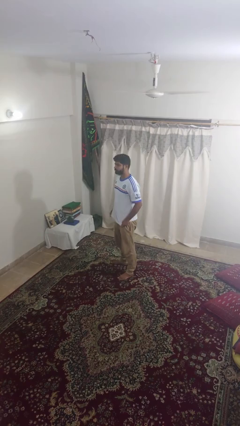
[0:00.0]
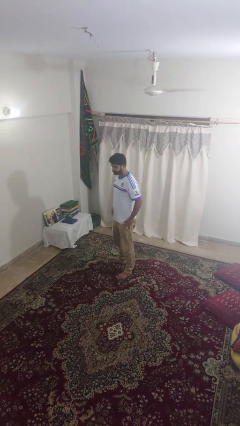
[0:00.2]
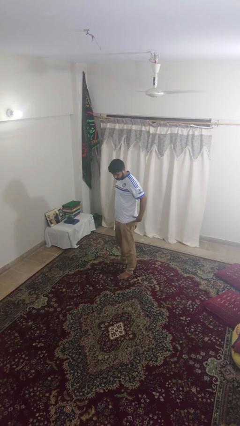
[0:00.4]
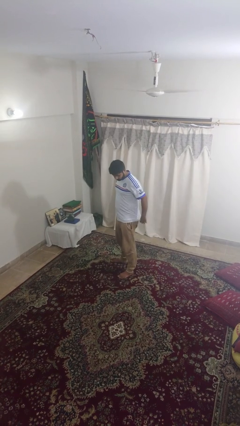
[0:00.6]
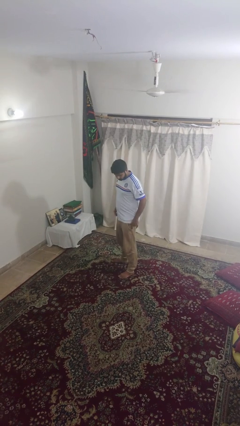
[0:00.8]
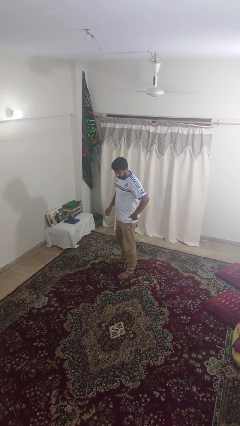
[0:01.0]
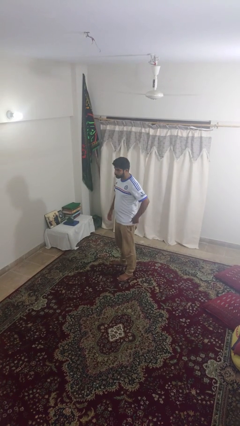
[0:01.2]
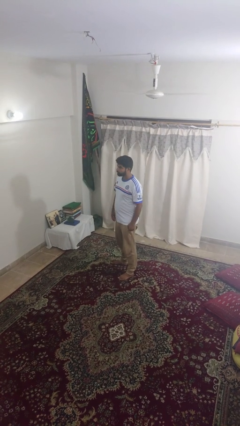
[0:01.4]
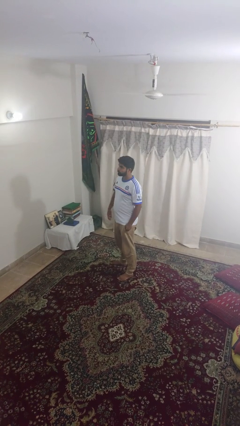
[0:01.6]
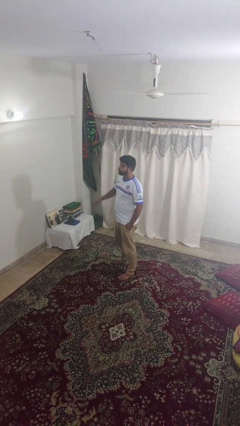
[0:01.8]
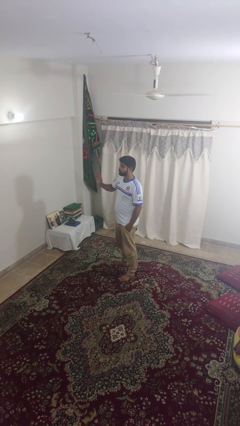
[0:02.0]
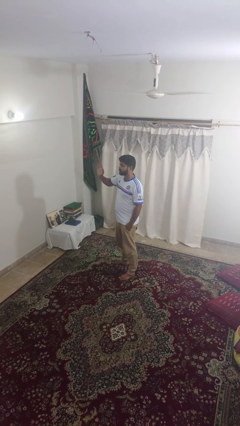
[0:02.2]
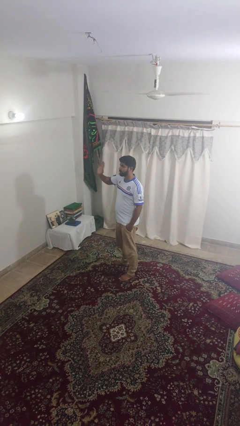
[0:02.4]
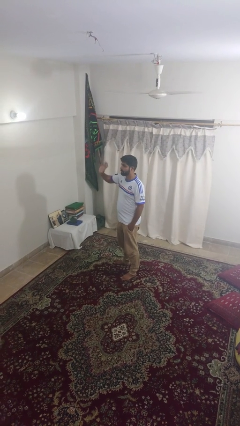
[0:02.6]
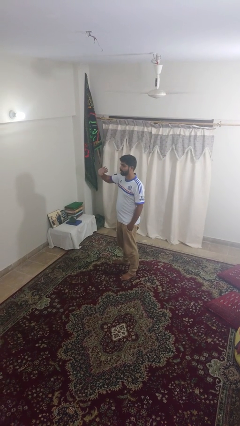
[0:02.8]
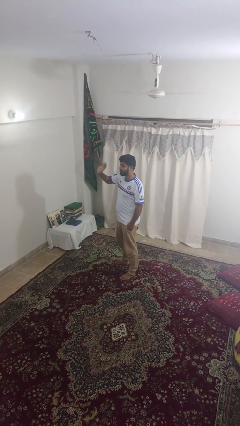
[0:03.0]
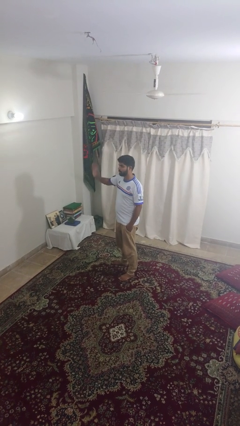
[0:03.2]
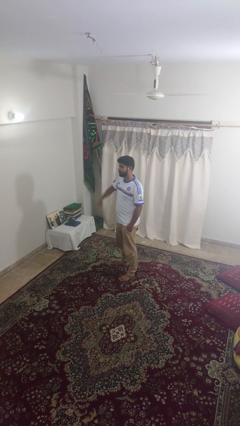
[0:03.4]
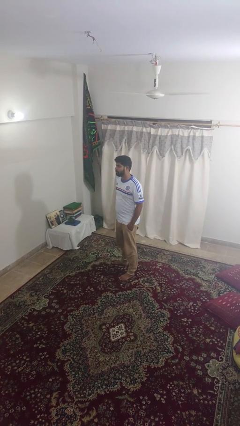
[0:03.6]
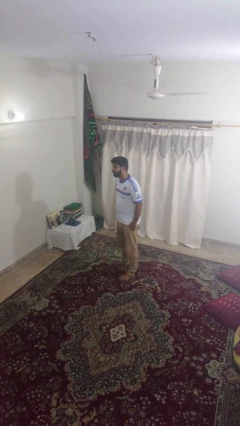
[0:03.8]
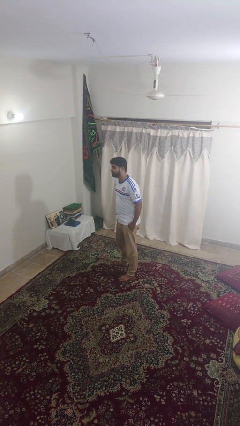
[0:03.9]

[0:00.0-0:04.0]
person waves at person

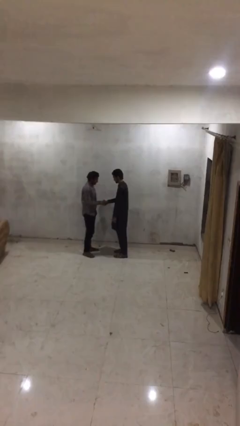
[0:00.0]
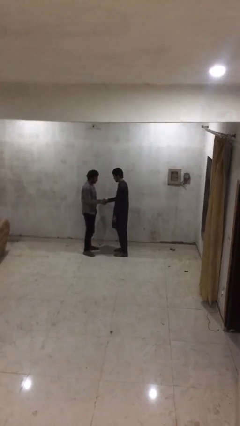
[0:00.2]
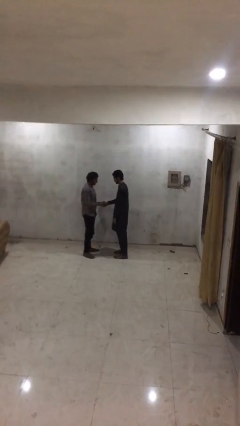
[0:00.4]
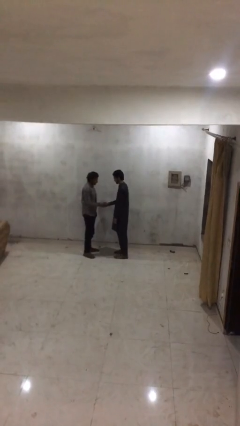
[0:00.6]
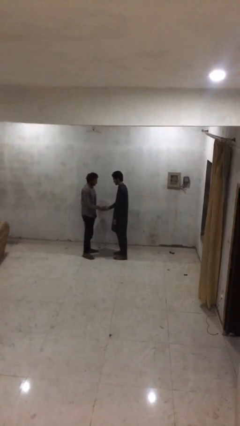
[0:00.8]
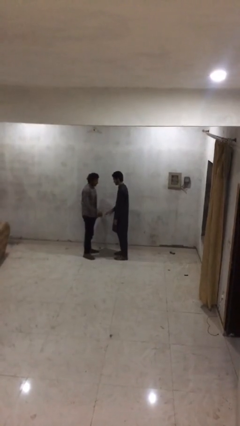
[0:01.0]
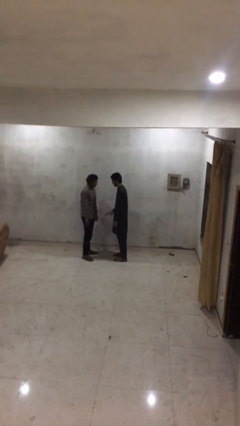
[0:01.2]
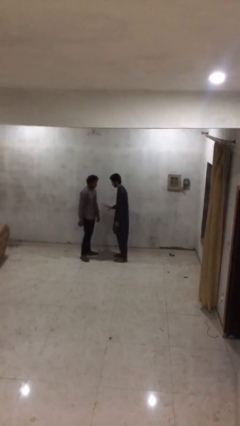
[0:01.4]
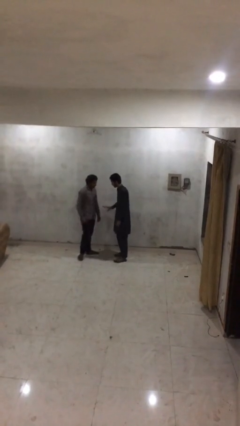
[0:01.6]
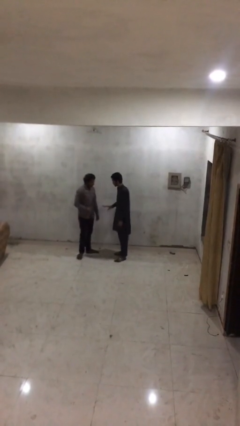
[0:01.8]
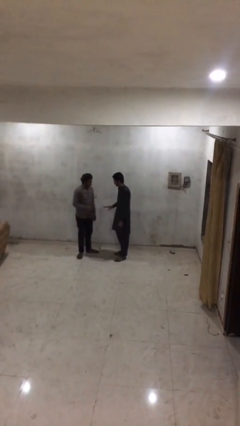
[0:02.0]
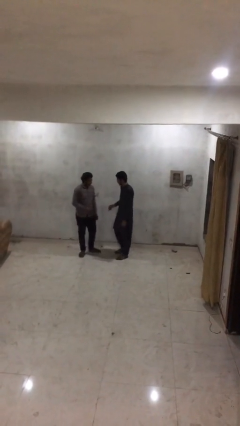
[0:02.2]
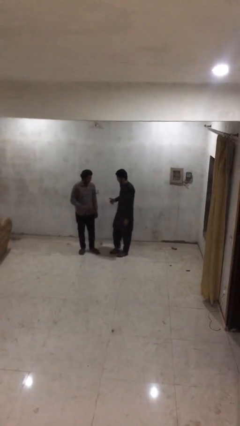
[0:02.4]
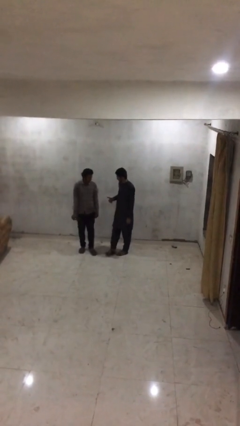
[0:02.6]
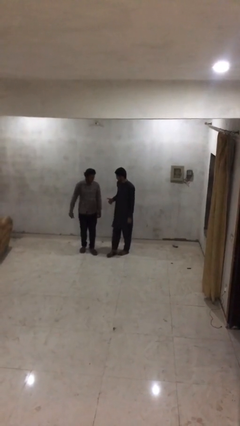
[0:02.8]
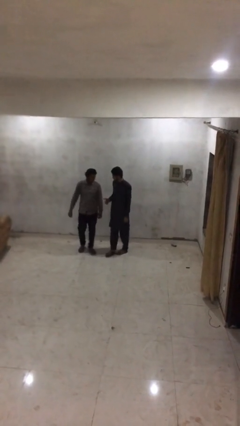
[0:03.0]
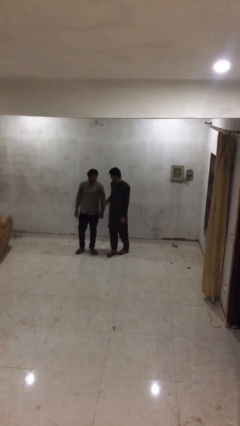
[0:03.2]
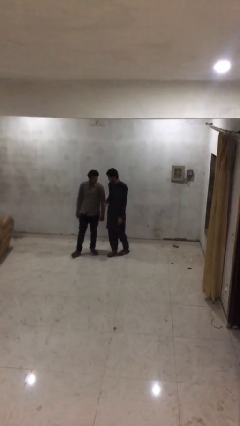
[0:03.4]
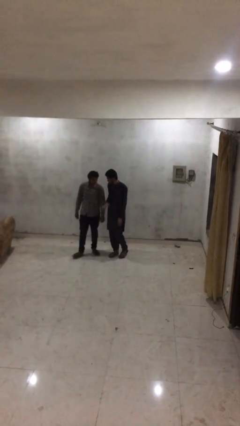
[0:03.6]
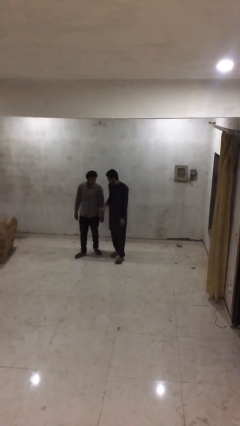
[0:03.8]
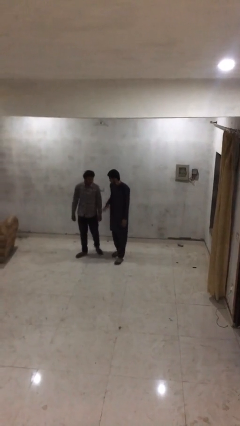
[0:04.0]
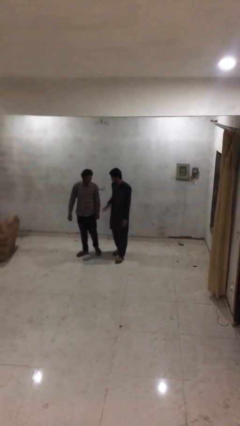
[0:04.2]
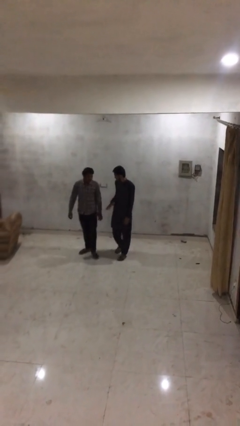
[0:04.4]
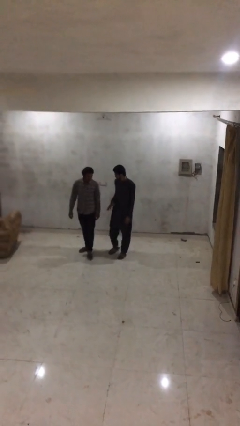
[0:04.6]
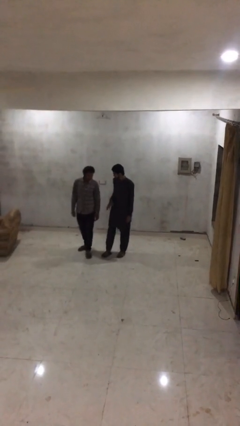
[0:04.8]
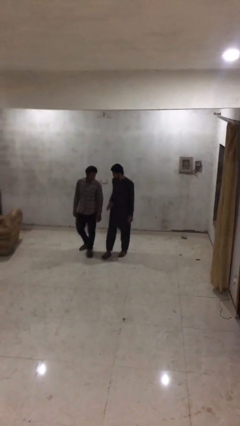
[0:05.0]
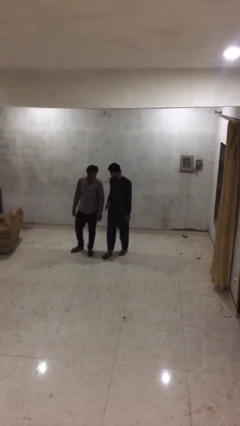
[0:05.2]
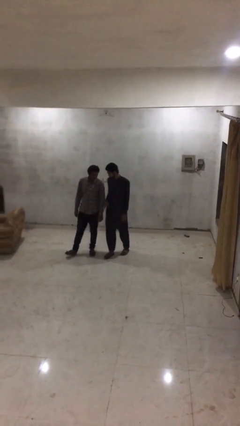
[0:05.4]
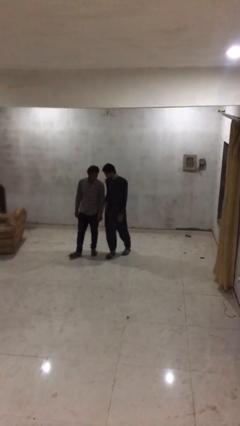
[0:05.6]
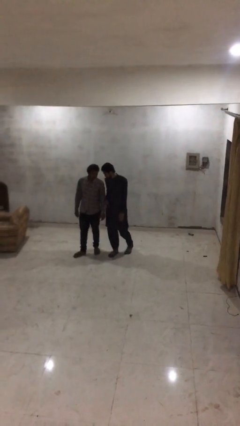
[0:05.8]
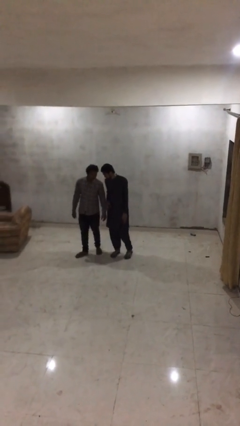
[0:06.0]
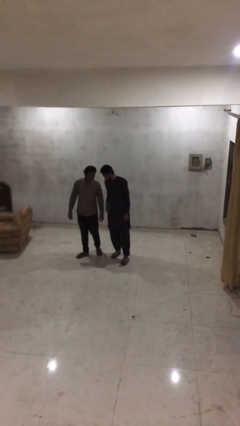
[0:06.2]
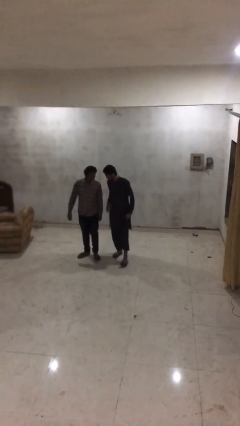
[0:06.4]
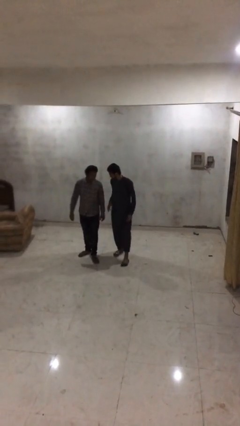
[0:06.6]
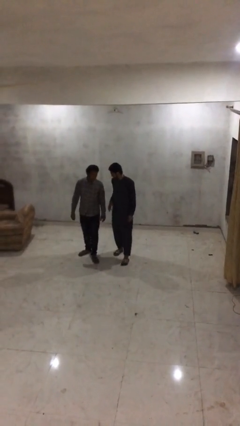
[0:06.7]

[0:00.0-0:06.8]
person talks to person

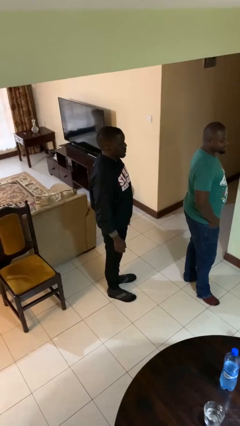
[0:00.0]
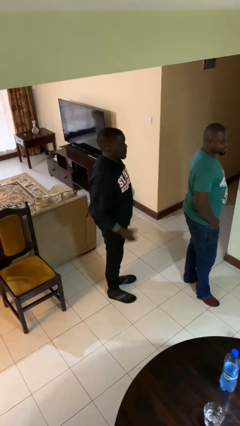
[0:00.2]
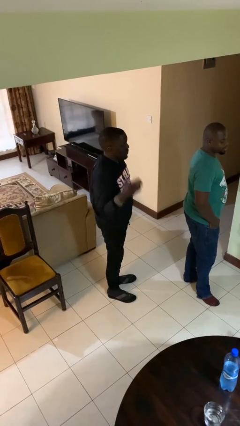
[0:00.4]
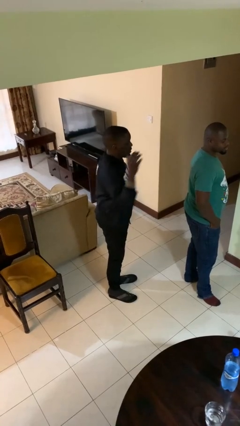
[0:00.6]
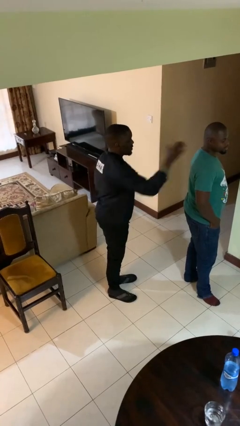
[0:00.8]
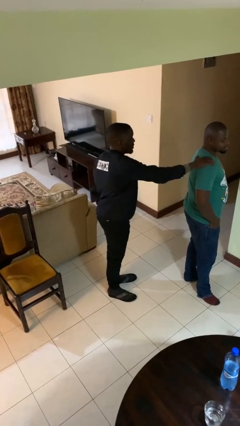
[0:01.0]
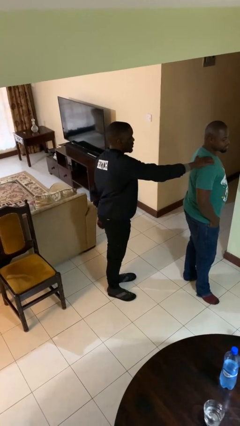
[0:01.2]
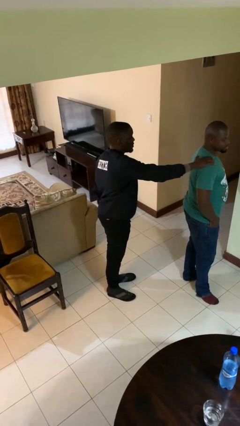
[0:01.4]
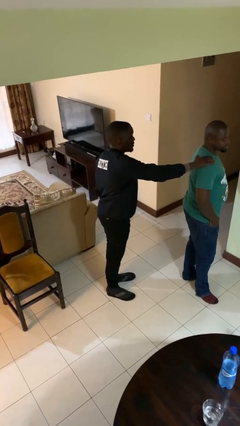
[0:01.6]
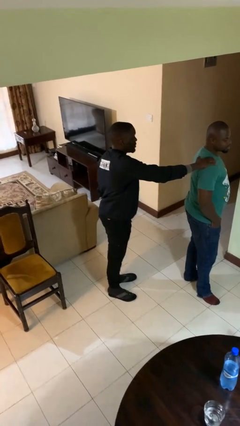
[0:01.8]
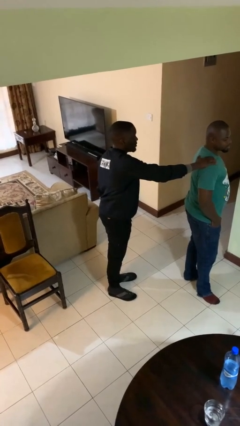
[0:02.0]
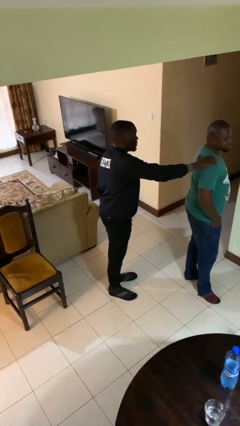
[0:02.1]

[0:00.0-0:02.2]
person grabs person by shoulder

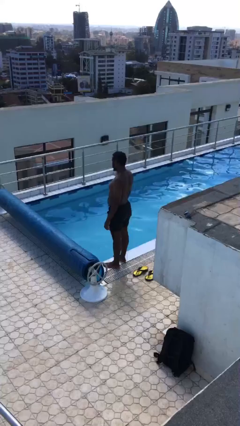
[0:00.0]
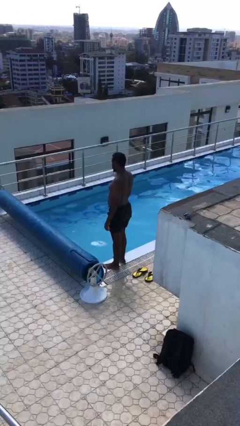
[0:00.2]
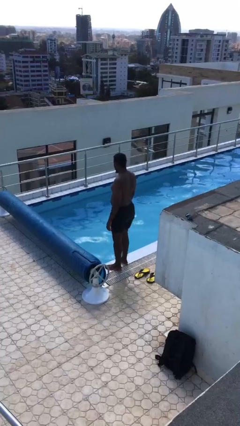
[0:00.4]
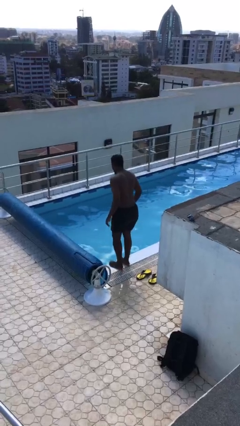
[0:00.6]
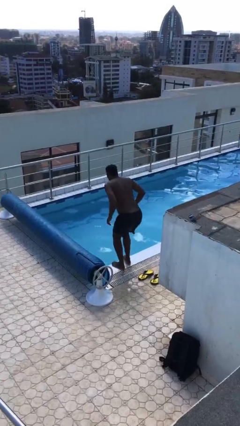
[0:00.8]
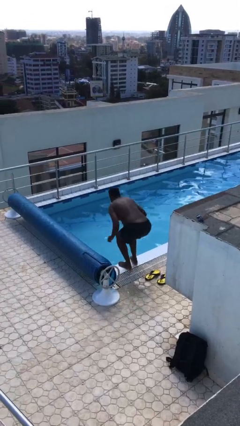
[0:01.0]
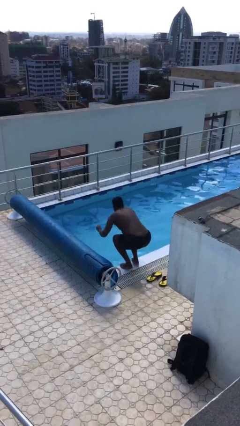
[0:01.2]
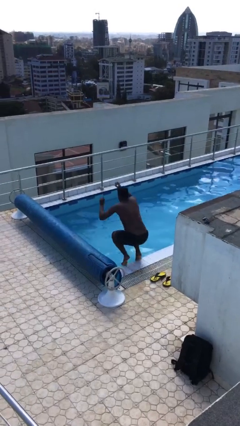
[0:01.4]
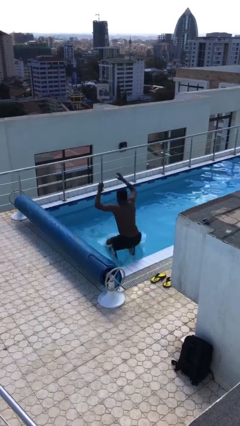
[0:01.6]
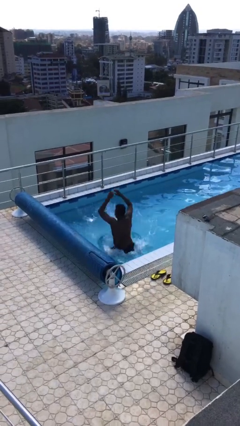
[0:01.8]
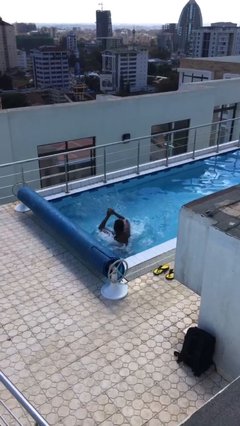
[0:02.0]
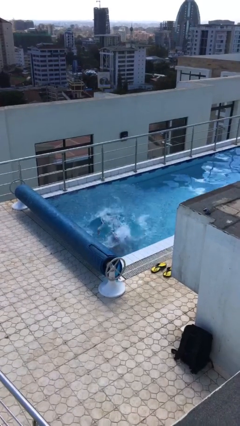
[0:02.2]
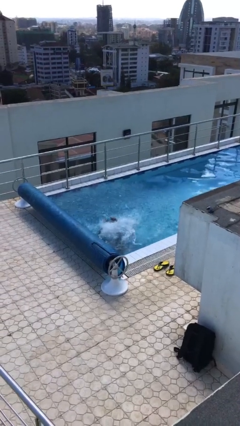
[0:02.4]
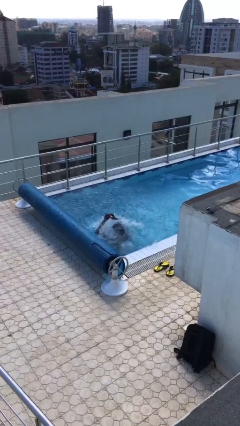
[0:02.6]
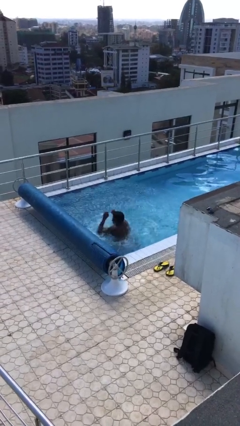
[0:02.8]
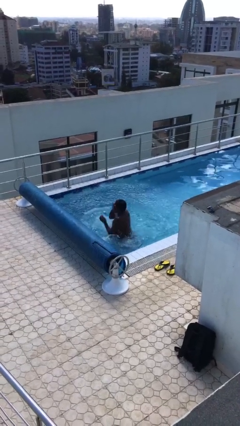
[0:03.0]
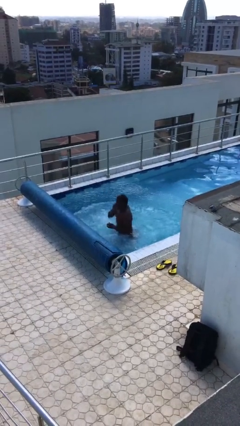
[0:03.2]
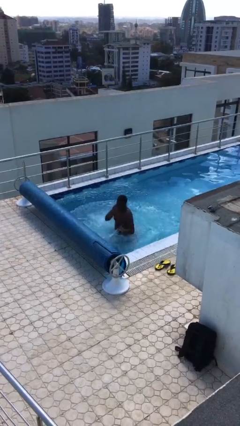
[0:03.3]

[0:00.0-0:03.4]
person jumps into pool

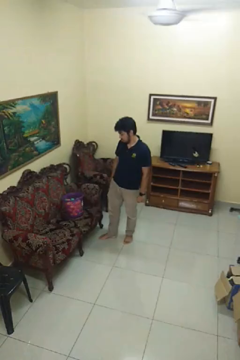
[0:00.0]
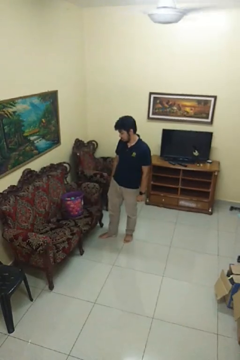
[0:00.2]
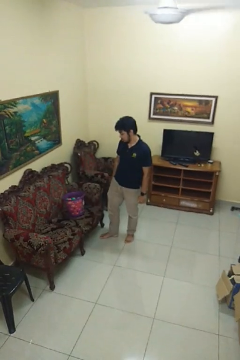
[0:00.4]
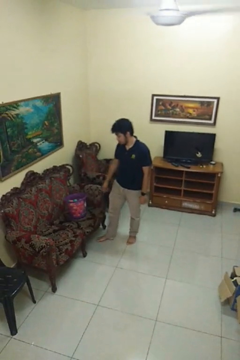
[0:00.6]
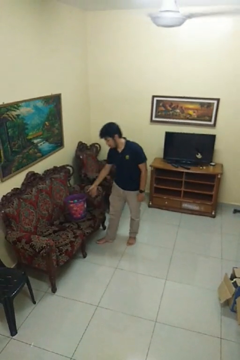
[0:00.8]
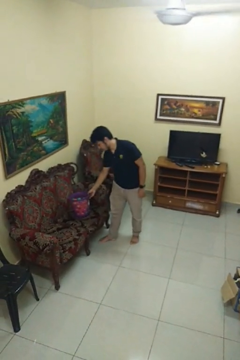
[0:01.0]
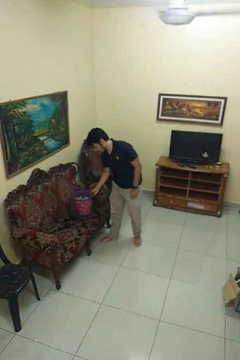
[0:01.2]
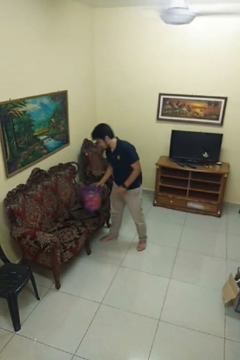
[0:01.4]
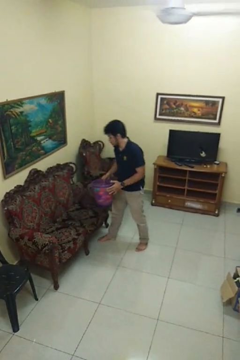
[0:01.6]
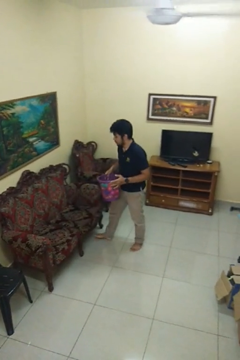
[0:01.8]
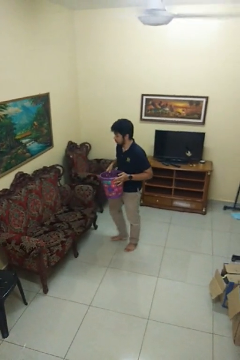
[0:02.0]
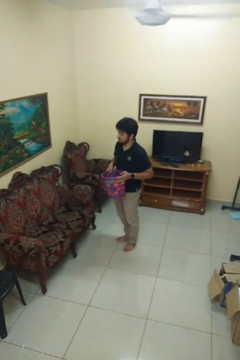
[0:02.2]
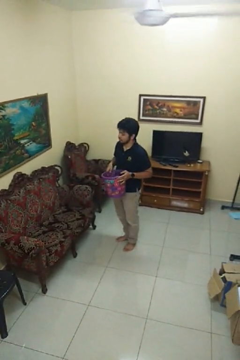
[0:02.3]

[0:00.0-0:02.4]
person picks up object from couch
